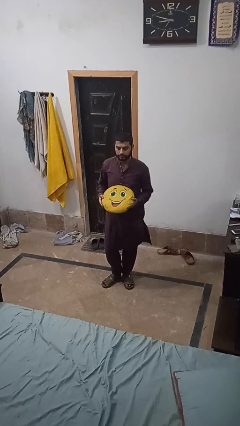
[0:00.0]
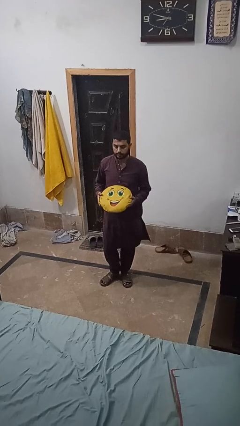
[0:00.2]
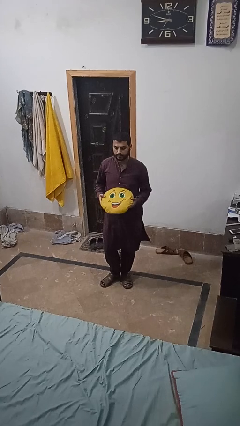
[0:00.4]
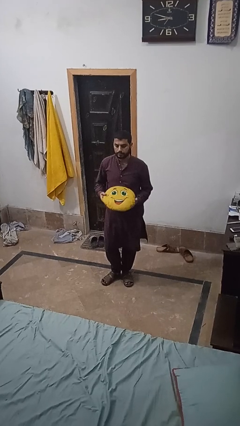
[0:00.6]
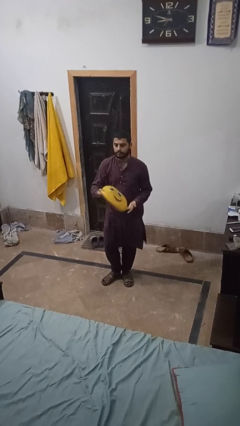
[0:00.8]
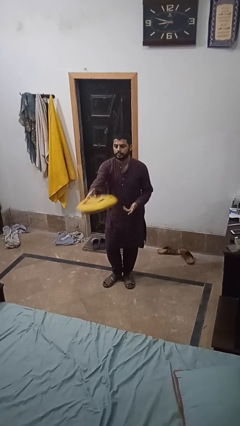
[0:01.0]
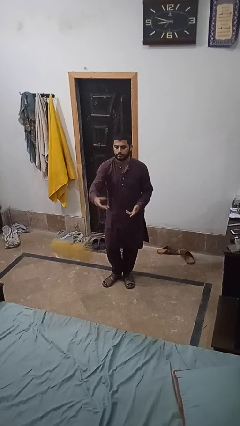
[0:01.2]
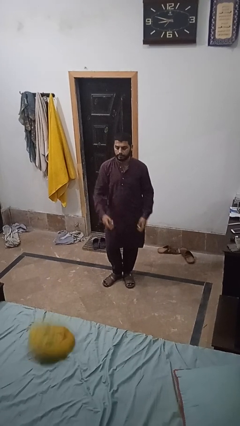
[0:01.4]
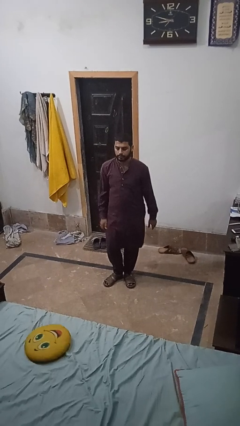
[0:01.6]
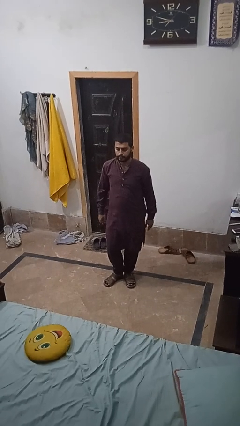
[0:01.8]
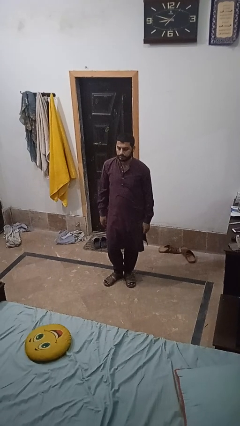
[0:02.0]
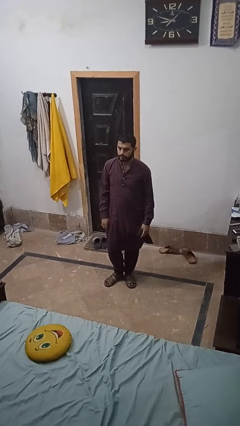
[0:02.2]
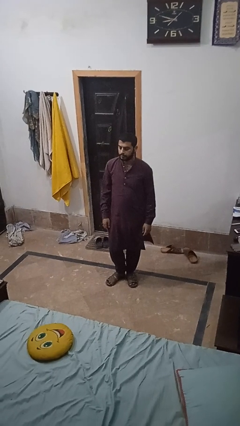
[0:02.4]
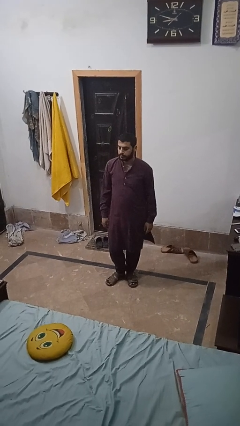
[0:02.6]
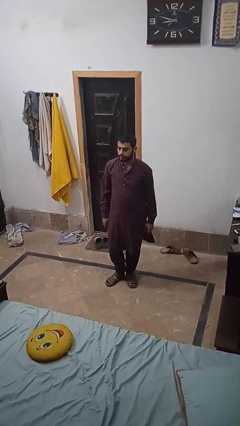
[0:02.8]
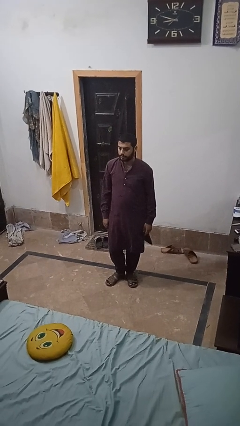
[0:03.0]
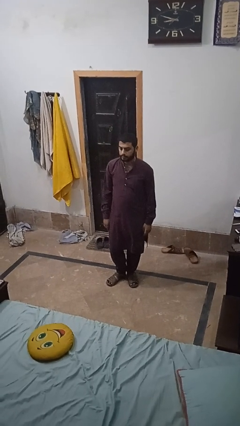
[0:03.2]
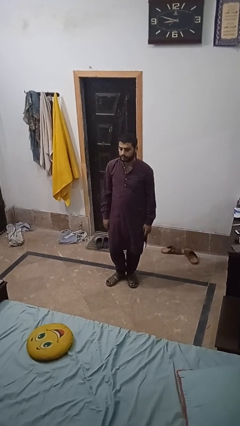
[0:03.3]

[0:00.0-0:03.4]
person throws object on bed

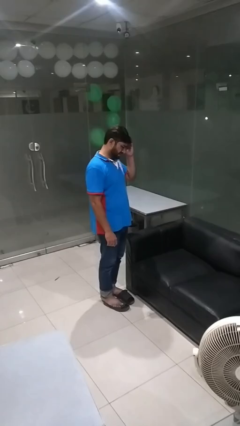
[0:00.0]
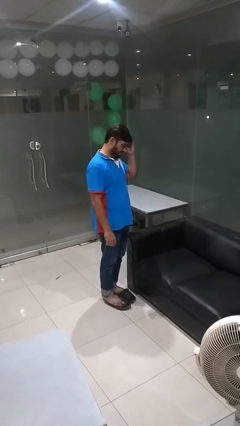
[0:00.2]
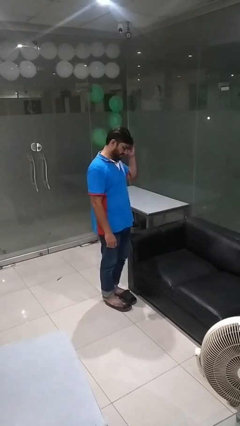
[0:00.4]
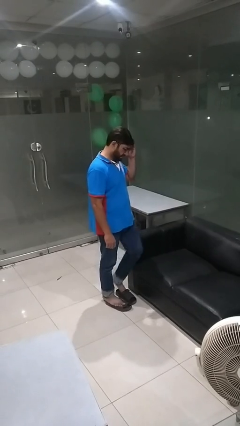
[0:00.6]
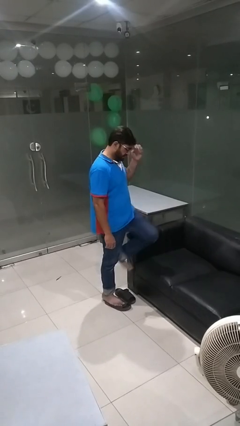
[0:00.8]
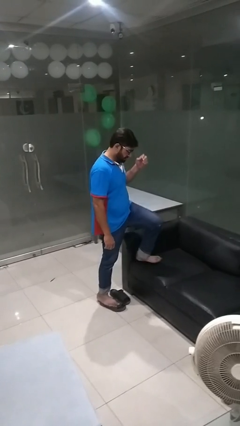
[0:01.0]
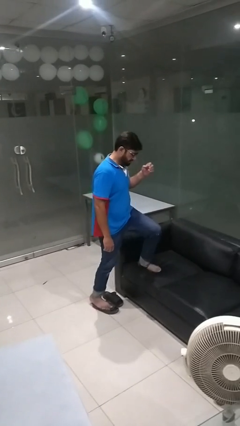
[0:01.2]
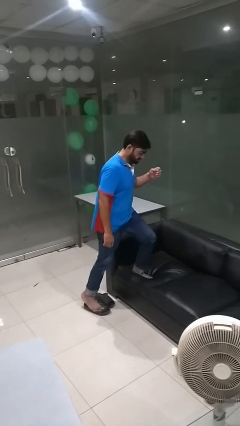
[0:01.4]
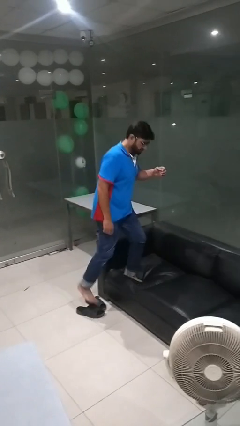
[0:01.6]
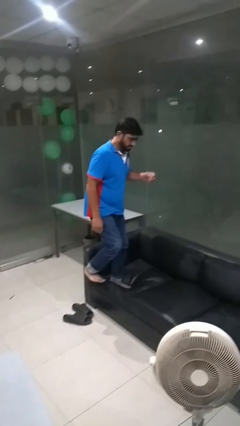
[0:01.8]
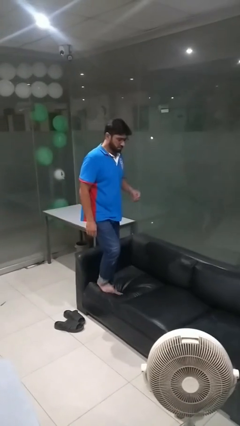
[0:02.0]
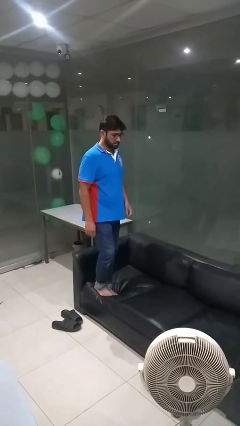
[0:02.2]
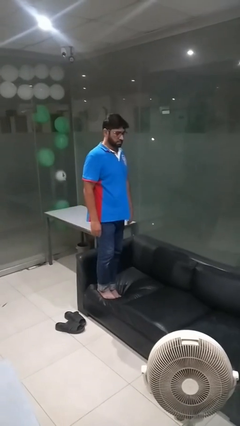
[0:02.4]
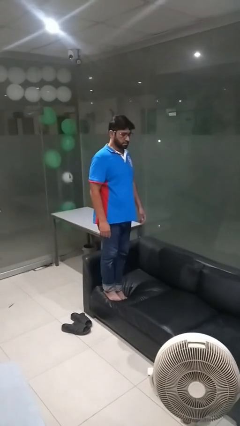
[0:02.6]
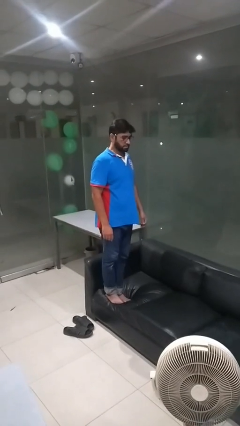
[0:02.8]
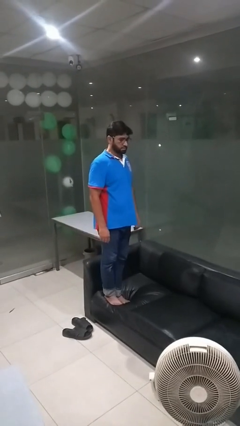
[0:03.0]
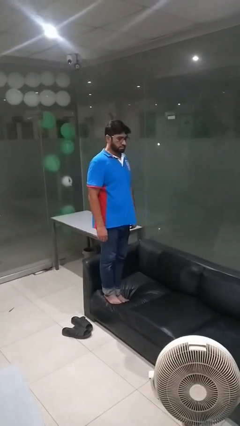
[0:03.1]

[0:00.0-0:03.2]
person climbs on couch

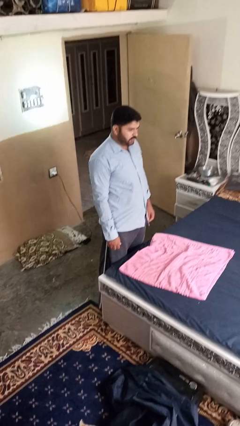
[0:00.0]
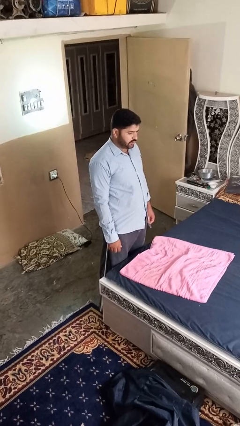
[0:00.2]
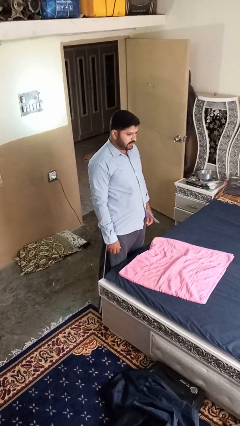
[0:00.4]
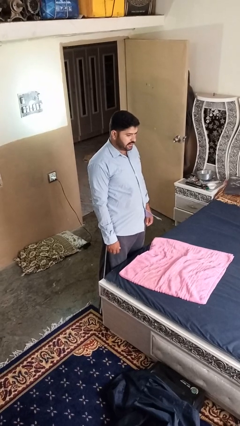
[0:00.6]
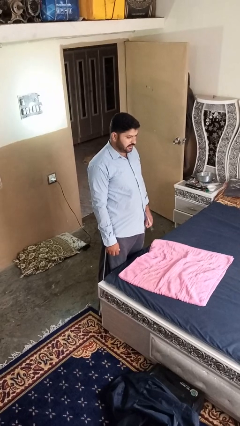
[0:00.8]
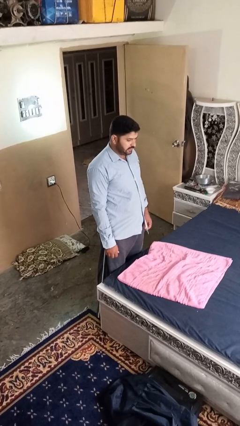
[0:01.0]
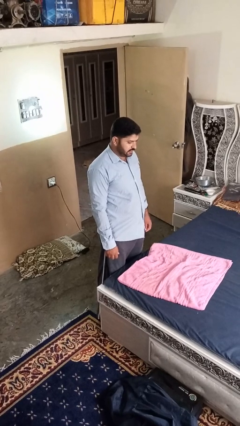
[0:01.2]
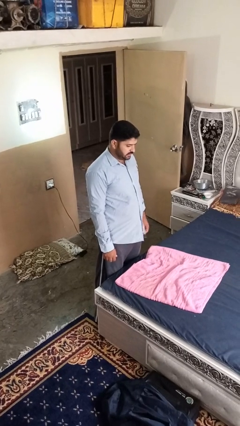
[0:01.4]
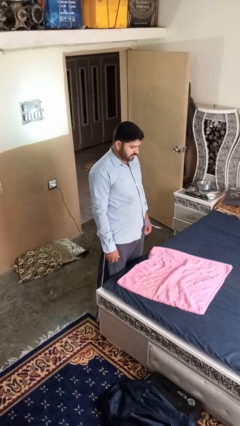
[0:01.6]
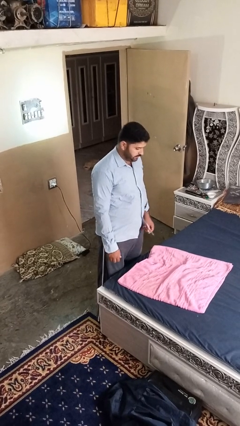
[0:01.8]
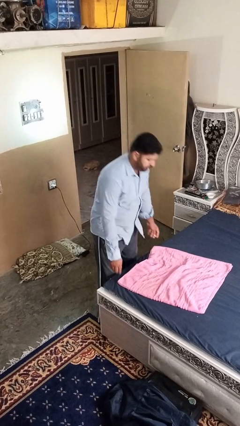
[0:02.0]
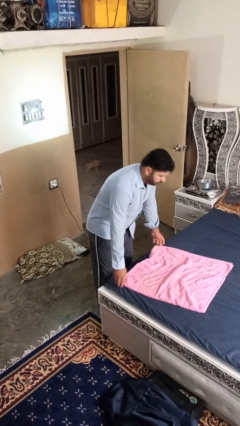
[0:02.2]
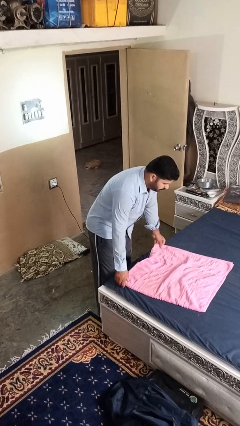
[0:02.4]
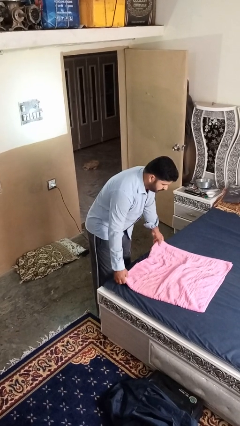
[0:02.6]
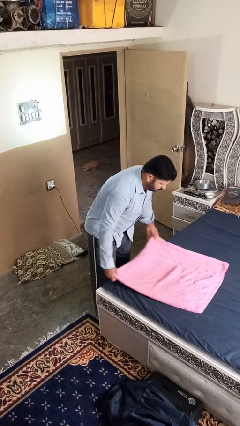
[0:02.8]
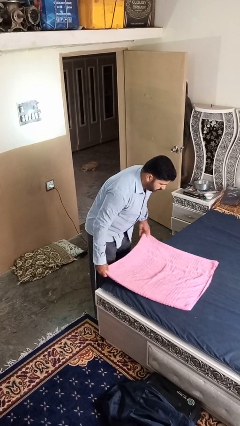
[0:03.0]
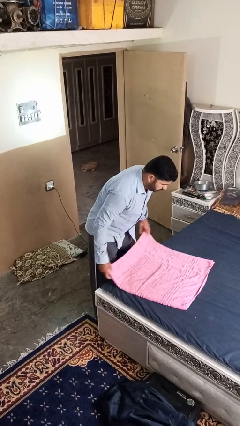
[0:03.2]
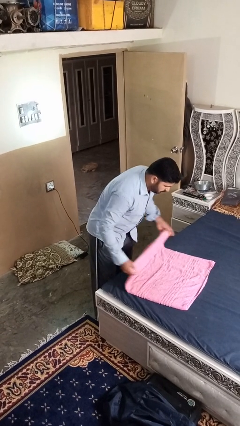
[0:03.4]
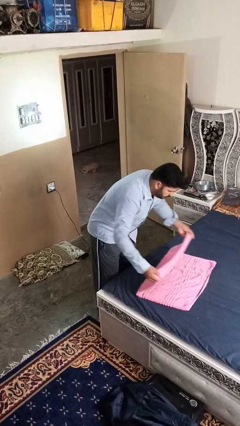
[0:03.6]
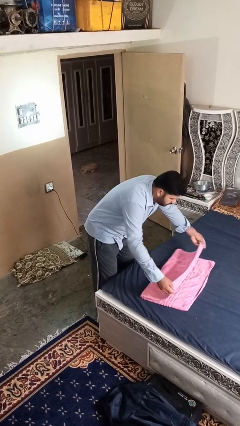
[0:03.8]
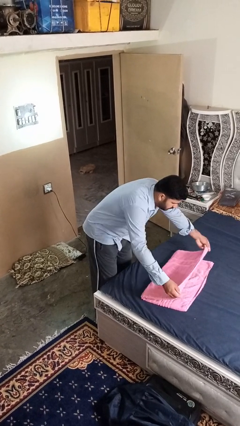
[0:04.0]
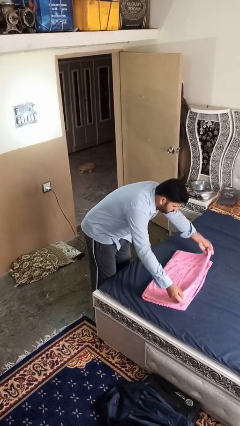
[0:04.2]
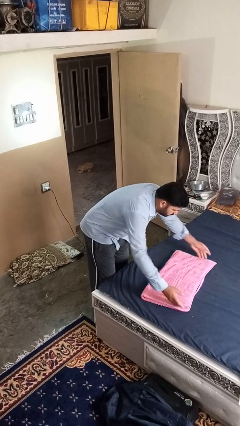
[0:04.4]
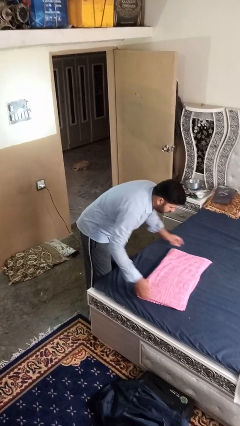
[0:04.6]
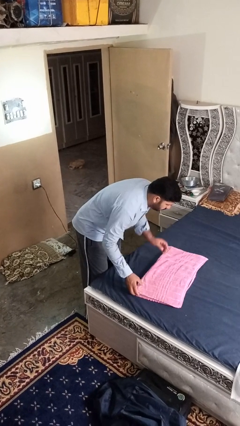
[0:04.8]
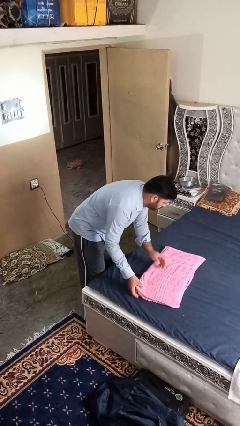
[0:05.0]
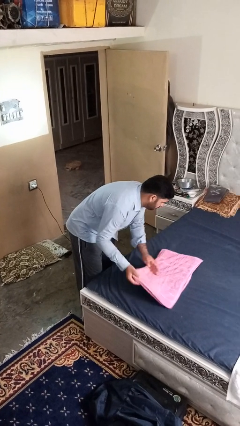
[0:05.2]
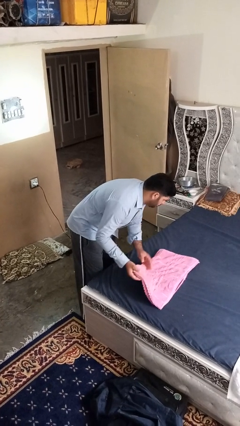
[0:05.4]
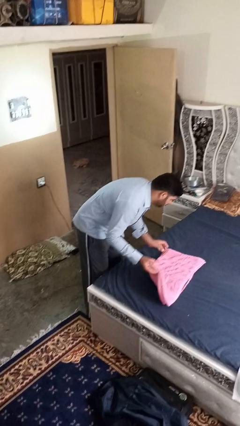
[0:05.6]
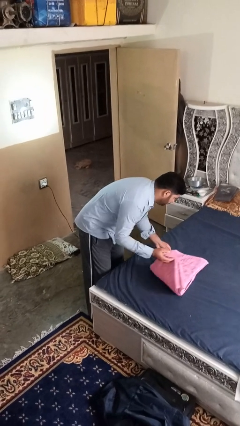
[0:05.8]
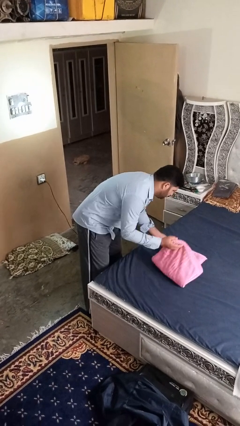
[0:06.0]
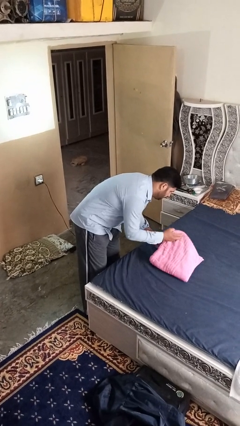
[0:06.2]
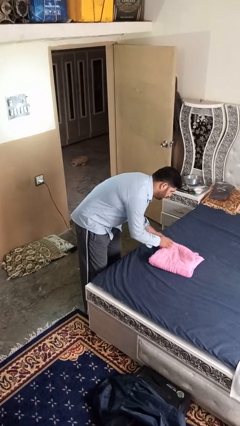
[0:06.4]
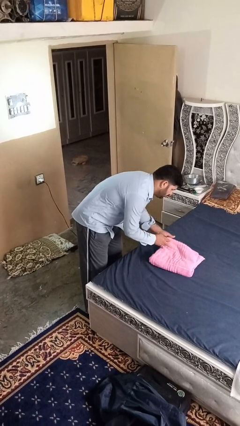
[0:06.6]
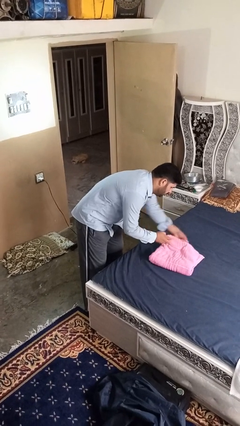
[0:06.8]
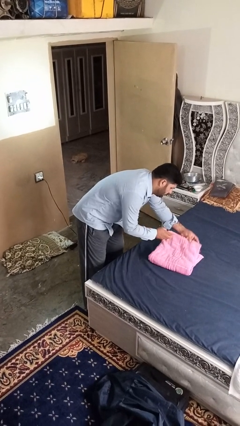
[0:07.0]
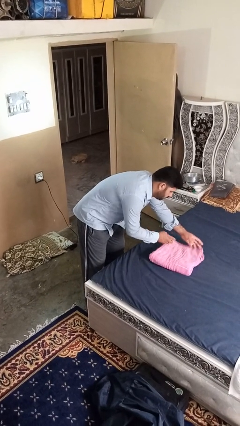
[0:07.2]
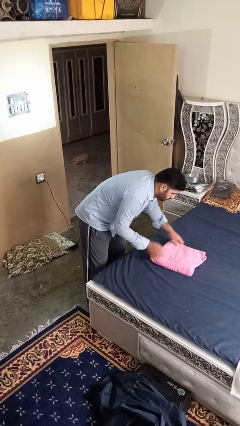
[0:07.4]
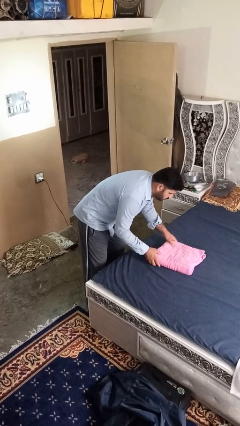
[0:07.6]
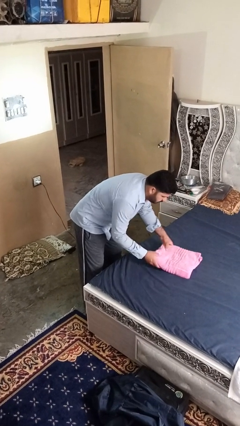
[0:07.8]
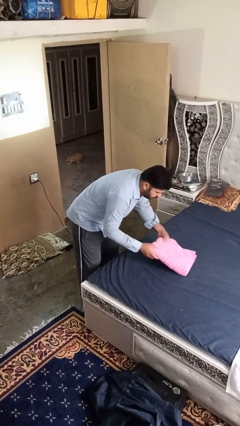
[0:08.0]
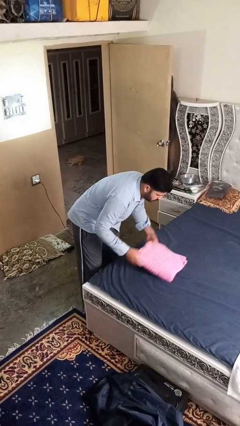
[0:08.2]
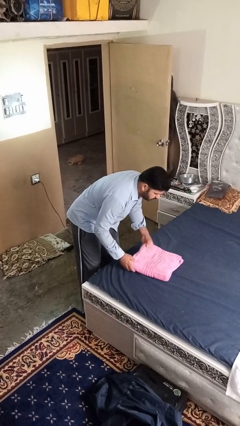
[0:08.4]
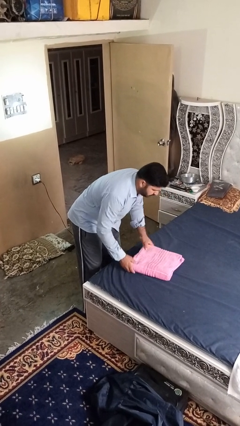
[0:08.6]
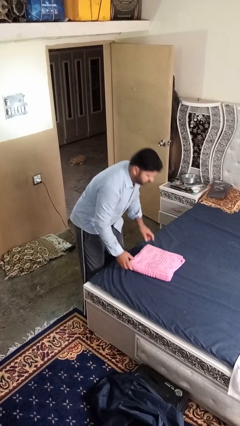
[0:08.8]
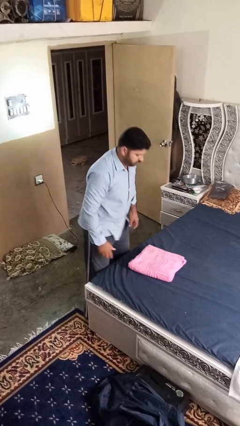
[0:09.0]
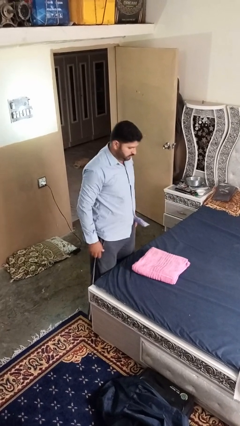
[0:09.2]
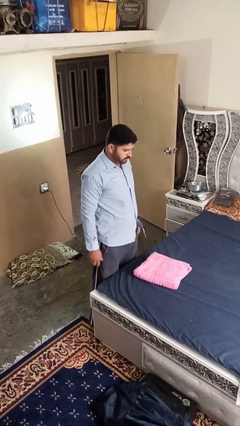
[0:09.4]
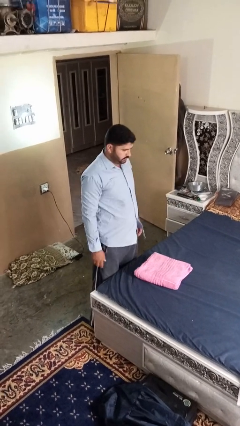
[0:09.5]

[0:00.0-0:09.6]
person folds towel

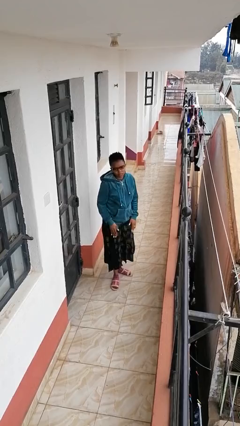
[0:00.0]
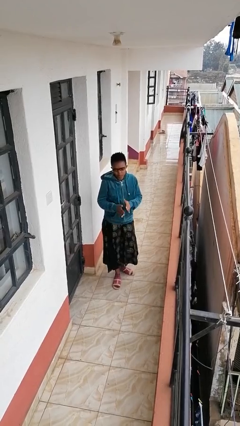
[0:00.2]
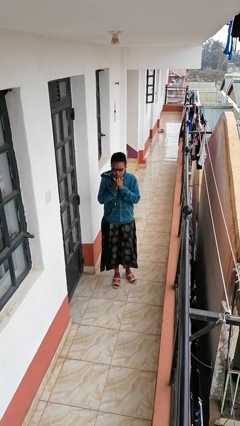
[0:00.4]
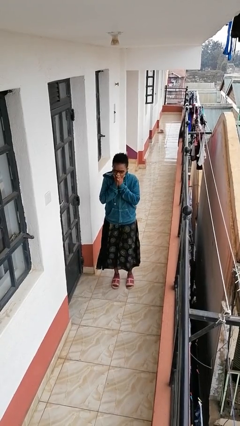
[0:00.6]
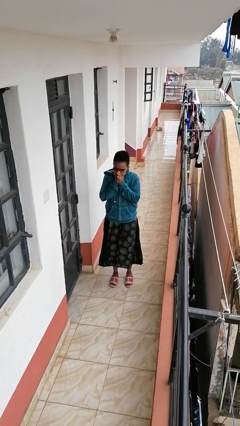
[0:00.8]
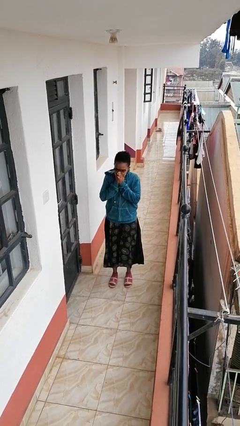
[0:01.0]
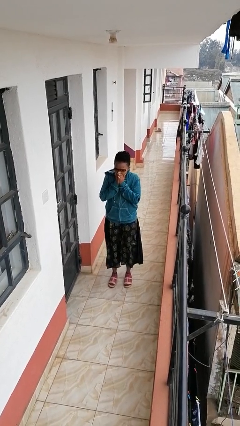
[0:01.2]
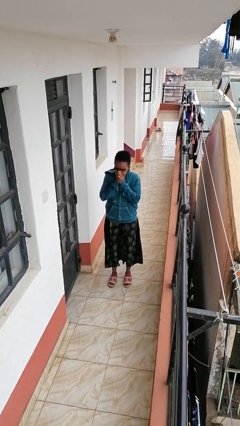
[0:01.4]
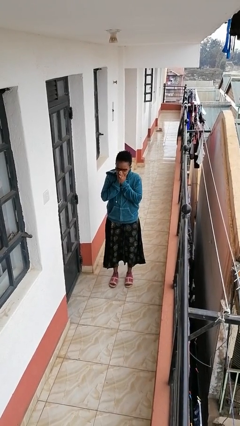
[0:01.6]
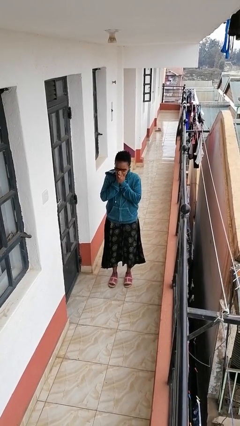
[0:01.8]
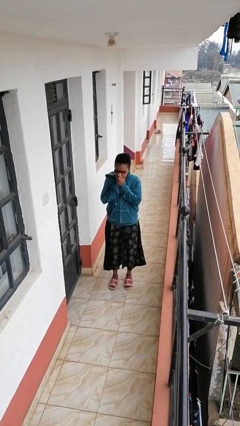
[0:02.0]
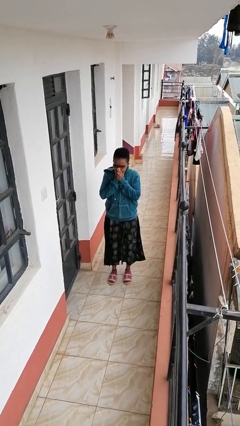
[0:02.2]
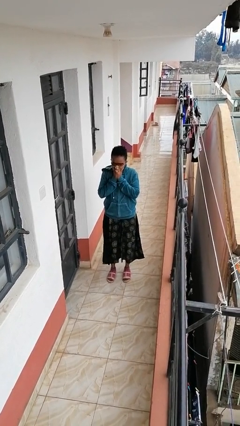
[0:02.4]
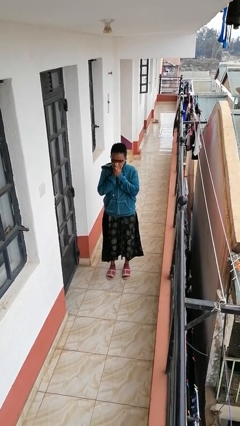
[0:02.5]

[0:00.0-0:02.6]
person blows into hands
